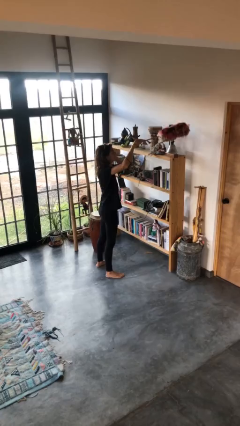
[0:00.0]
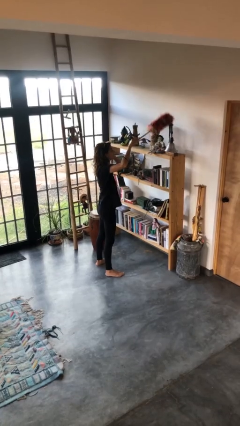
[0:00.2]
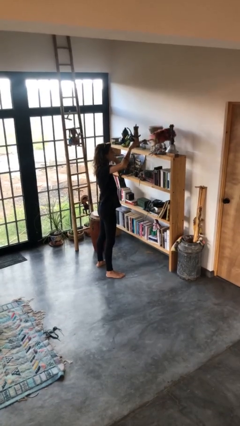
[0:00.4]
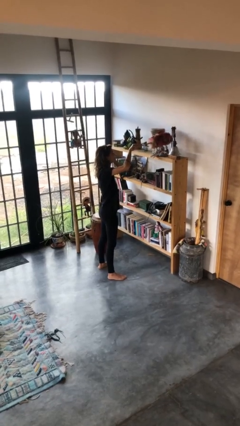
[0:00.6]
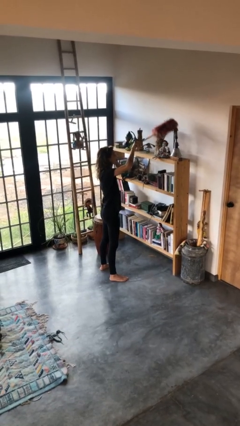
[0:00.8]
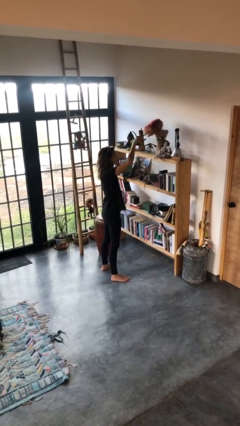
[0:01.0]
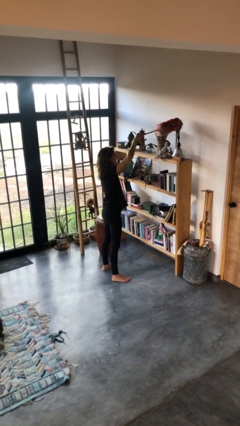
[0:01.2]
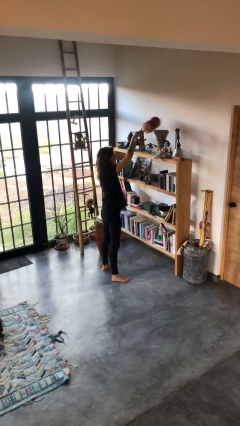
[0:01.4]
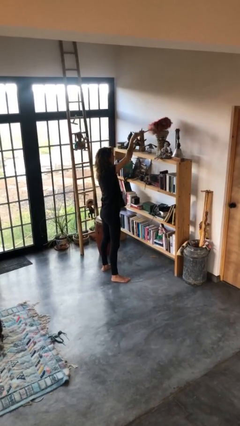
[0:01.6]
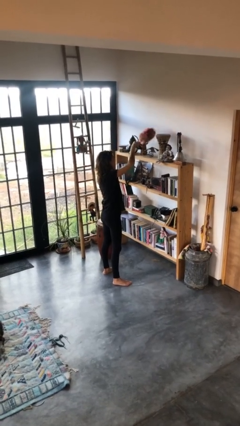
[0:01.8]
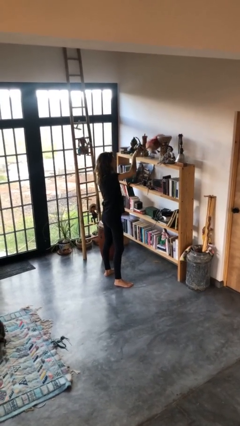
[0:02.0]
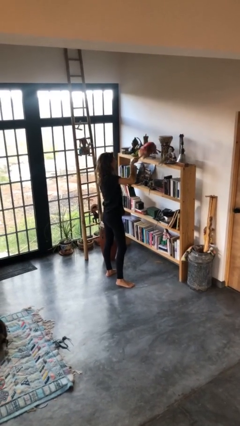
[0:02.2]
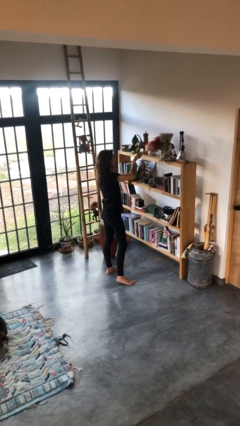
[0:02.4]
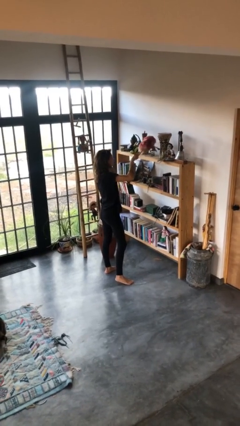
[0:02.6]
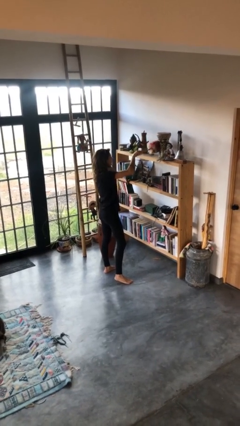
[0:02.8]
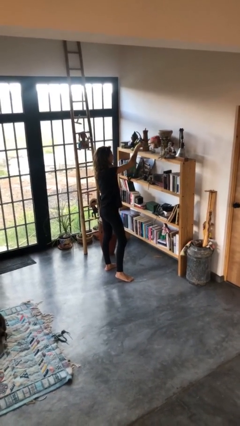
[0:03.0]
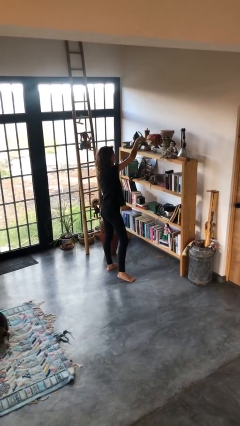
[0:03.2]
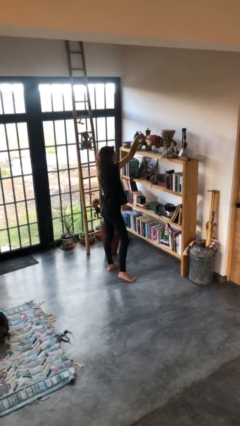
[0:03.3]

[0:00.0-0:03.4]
person dusts furniture

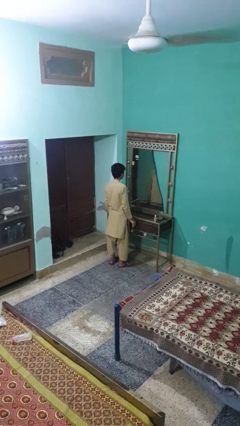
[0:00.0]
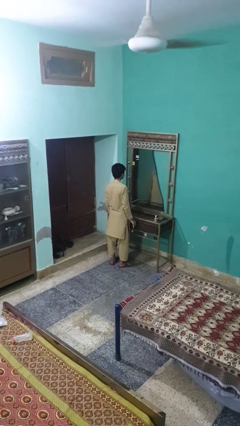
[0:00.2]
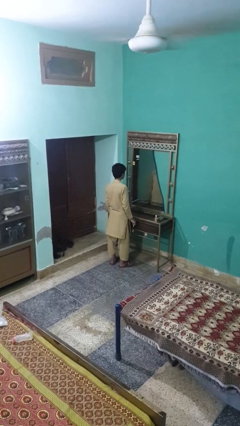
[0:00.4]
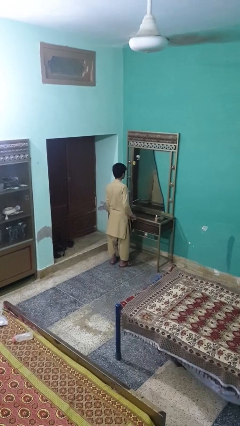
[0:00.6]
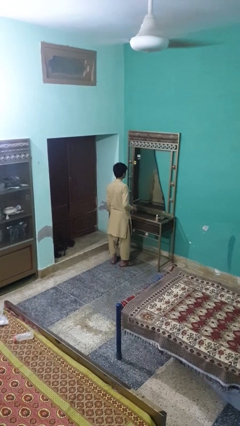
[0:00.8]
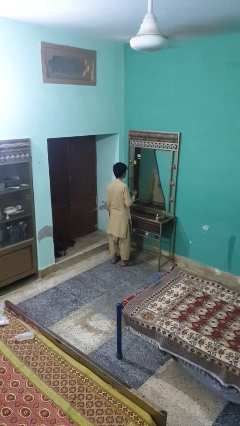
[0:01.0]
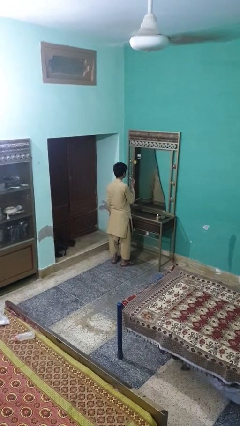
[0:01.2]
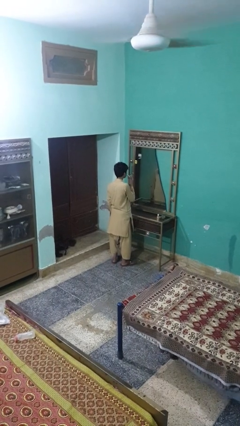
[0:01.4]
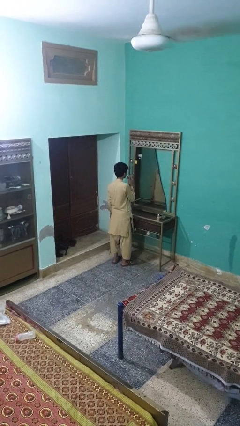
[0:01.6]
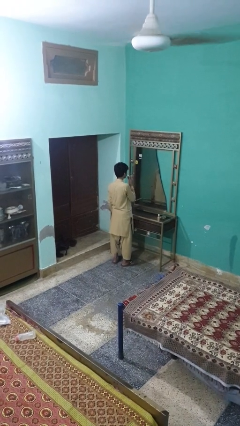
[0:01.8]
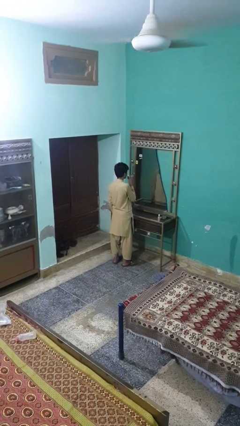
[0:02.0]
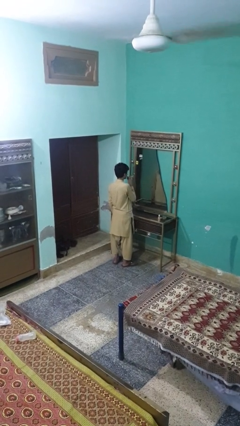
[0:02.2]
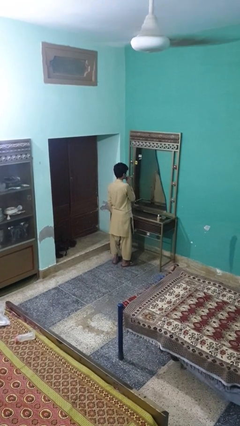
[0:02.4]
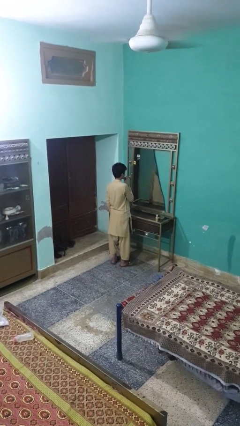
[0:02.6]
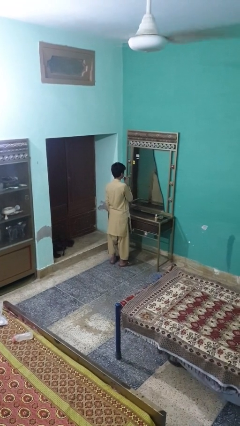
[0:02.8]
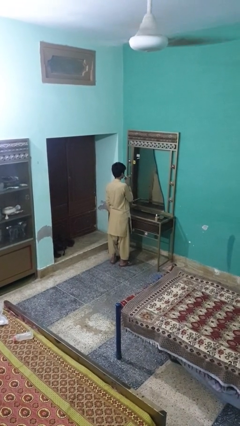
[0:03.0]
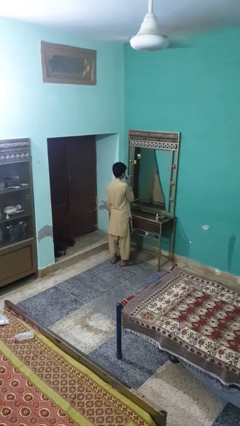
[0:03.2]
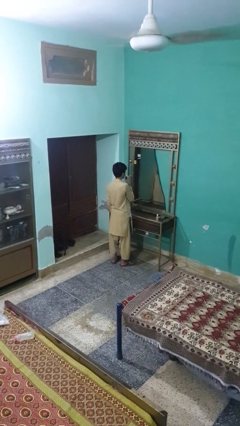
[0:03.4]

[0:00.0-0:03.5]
person applies lip makeup

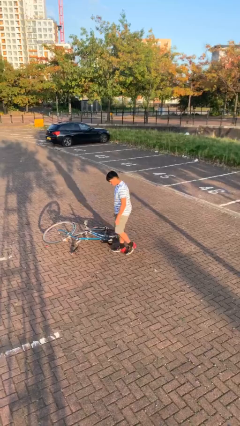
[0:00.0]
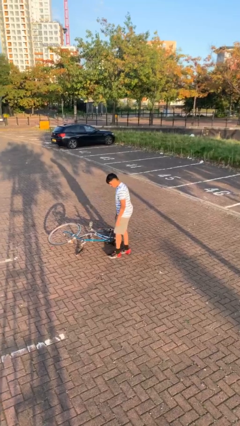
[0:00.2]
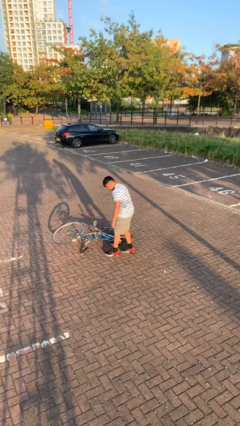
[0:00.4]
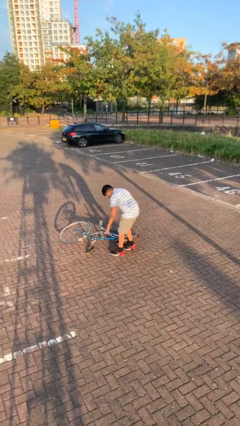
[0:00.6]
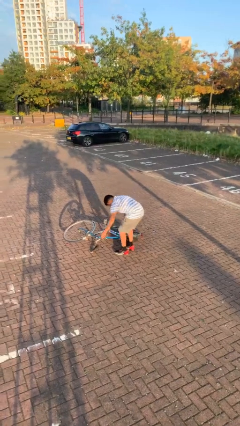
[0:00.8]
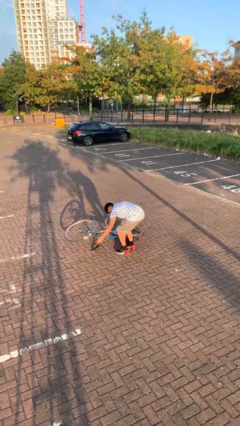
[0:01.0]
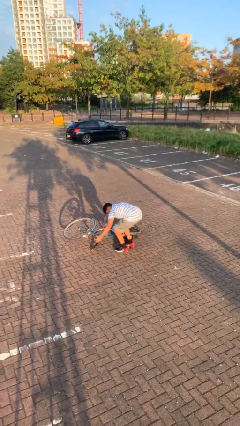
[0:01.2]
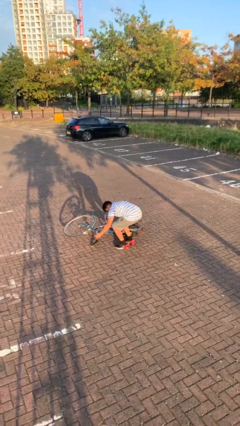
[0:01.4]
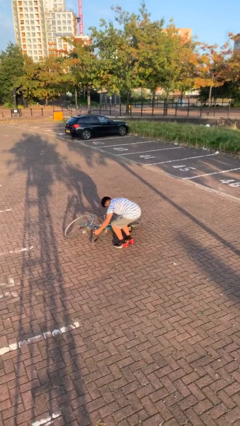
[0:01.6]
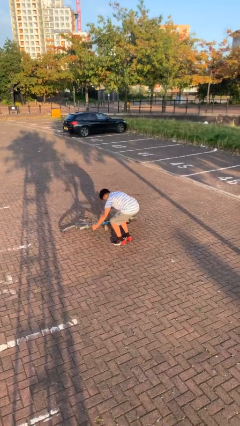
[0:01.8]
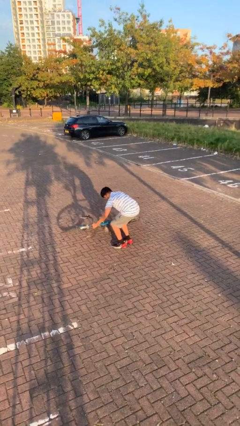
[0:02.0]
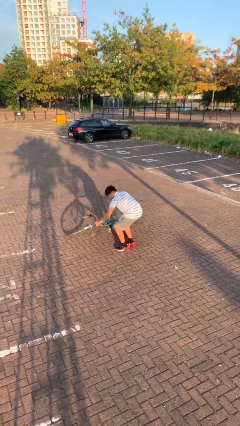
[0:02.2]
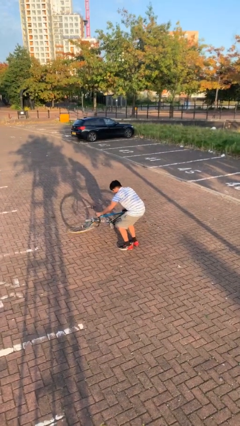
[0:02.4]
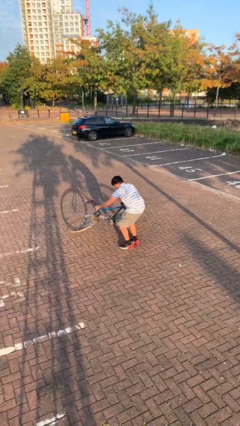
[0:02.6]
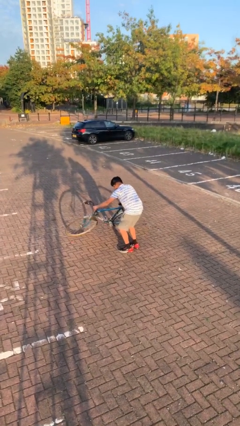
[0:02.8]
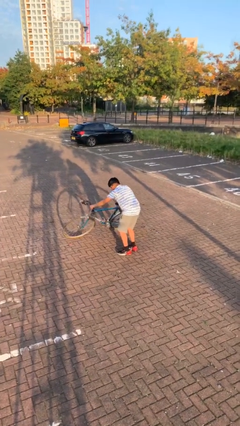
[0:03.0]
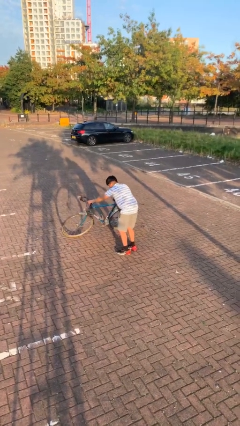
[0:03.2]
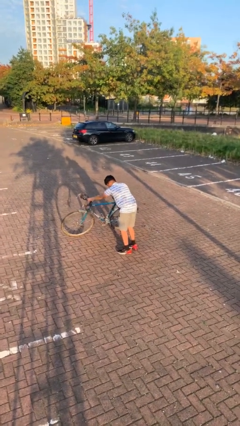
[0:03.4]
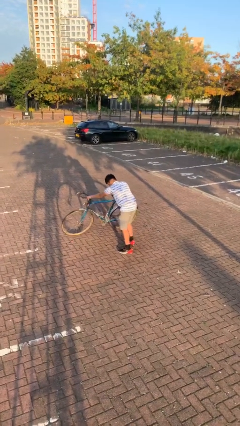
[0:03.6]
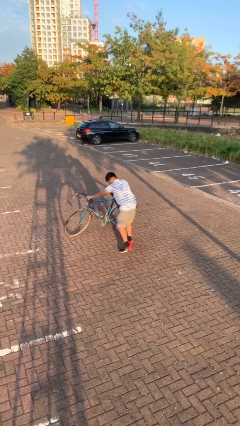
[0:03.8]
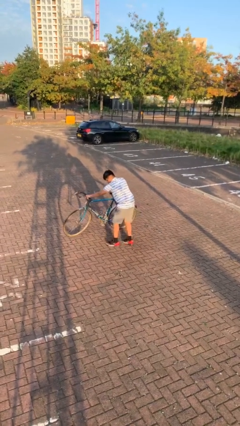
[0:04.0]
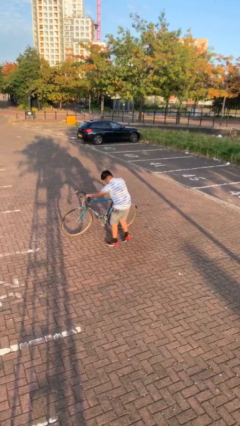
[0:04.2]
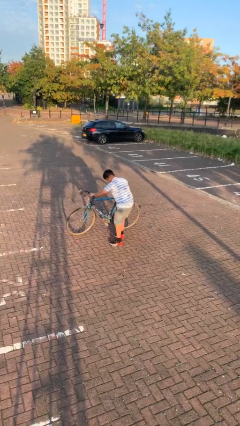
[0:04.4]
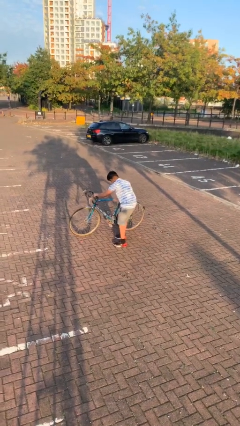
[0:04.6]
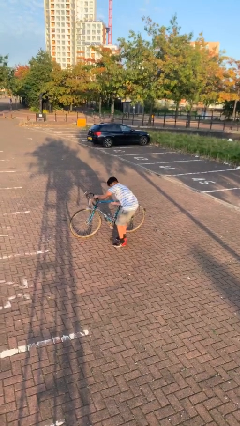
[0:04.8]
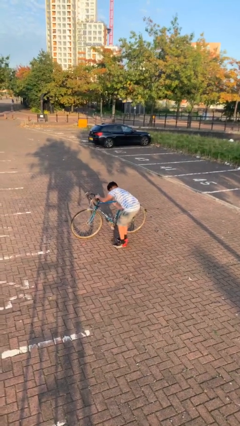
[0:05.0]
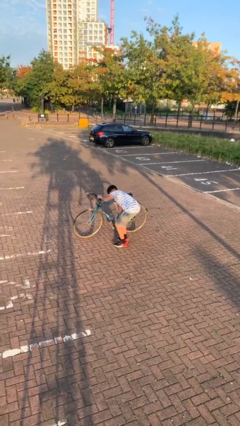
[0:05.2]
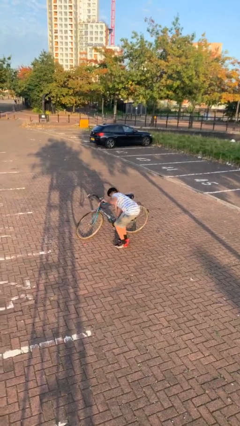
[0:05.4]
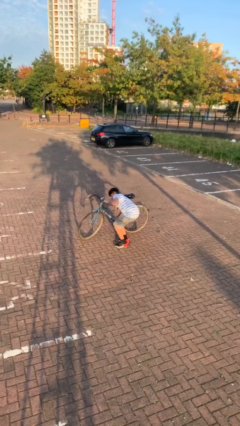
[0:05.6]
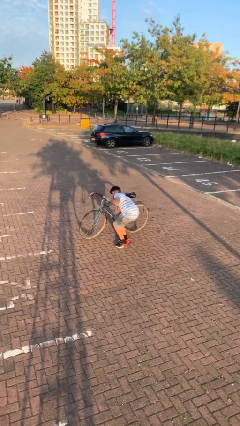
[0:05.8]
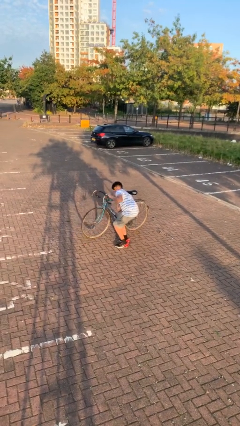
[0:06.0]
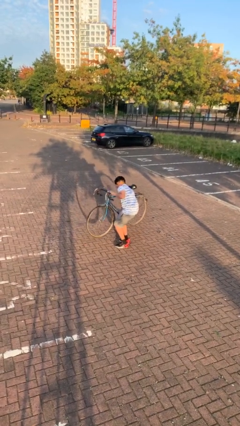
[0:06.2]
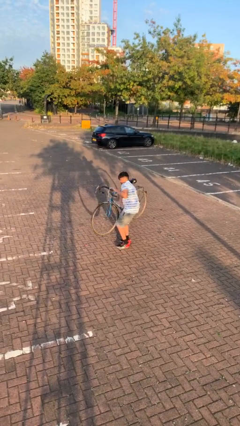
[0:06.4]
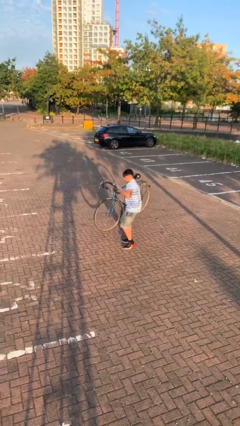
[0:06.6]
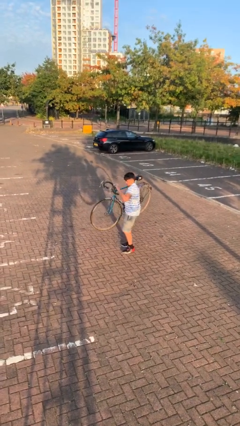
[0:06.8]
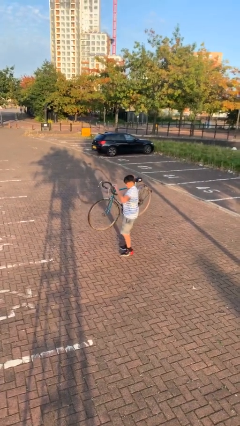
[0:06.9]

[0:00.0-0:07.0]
person picks up object from floor

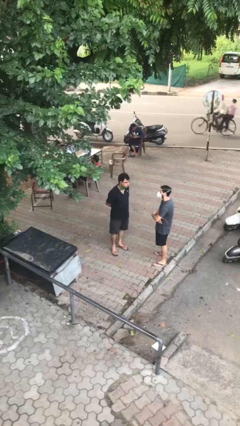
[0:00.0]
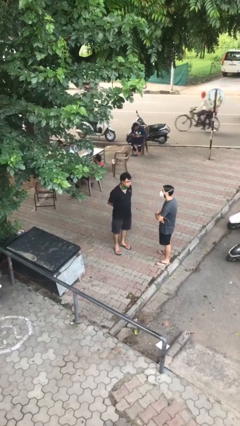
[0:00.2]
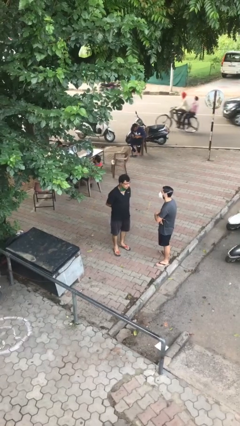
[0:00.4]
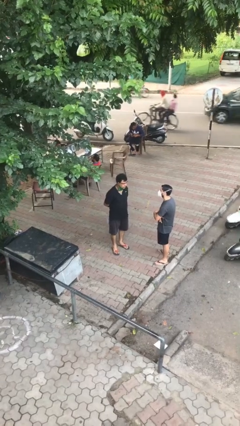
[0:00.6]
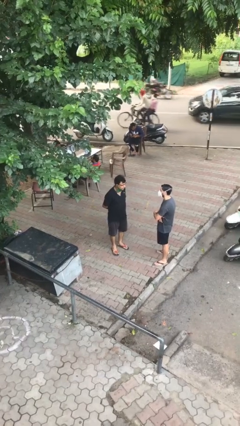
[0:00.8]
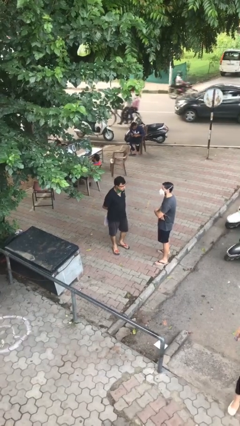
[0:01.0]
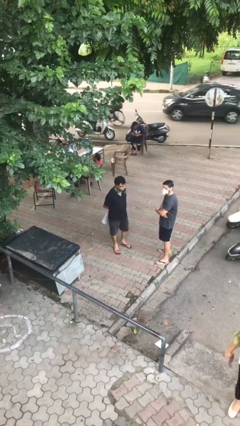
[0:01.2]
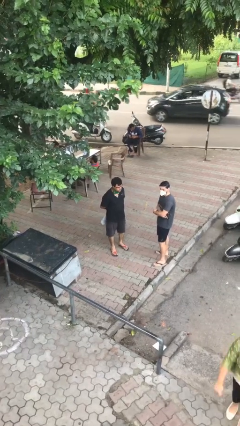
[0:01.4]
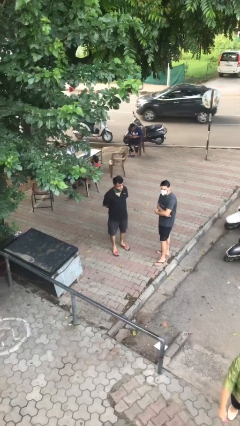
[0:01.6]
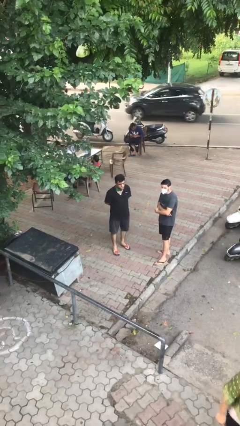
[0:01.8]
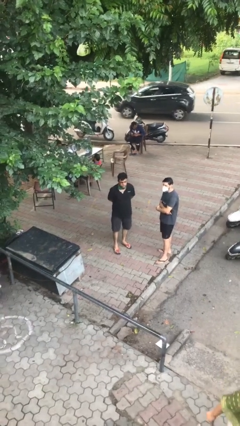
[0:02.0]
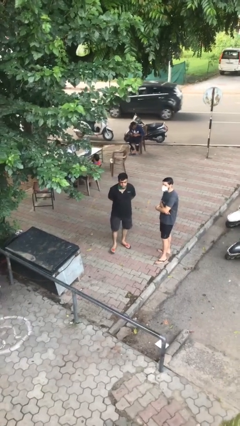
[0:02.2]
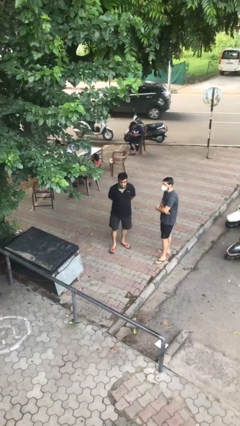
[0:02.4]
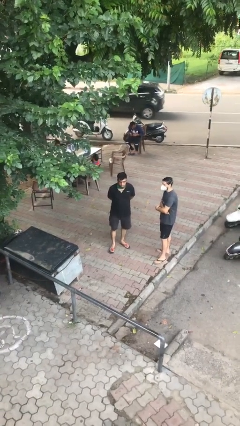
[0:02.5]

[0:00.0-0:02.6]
person talks to person

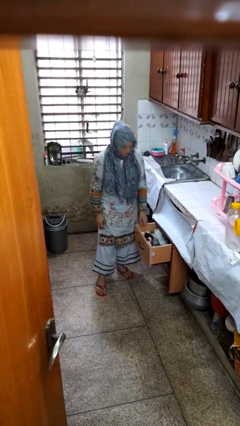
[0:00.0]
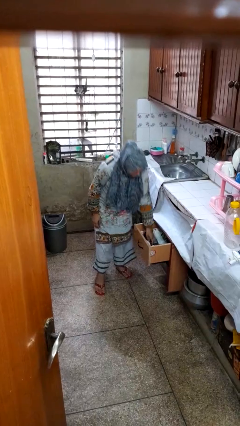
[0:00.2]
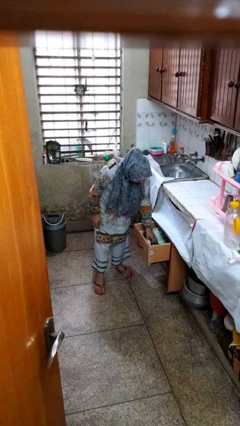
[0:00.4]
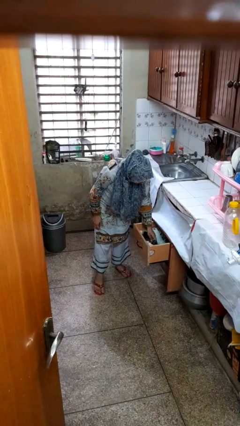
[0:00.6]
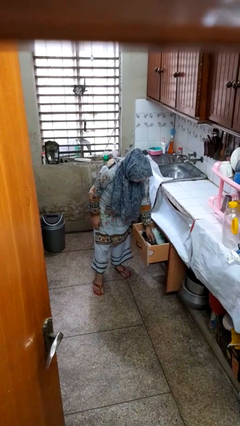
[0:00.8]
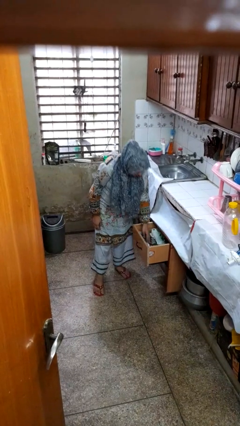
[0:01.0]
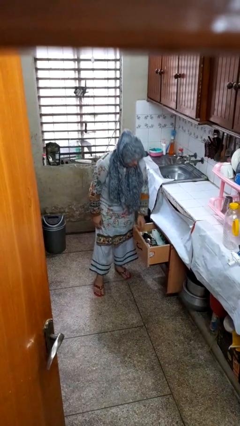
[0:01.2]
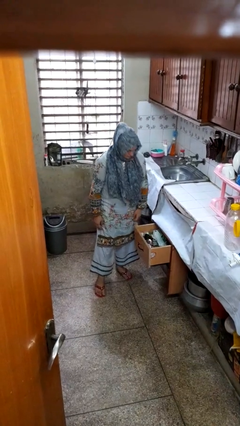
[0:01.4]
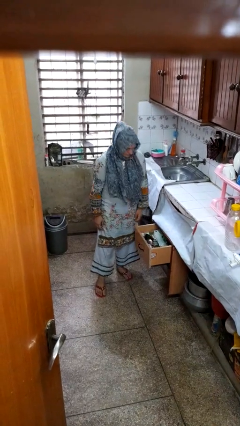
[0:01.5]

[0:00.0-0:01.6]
person searches in kitchen drawer
